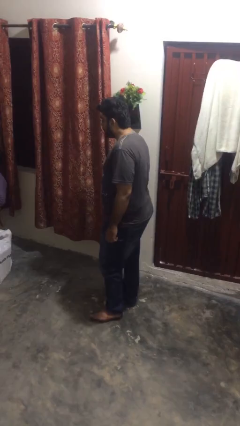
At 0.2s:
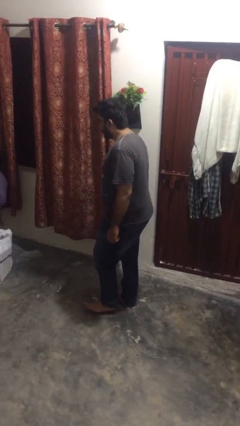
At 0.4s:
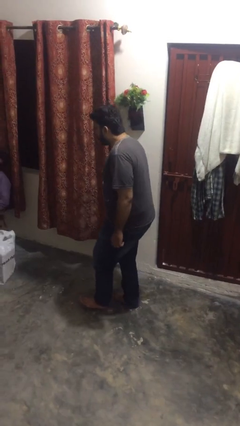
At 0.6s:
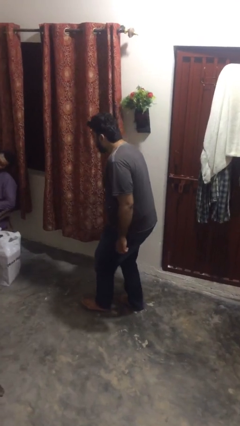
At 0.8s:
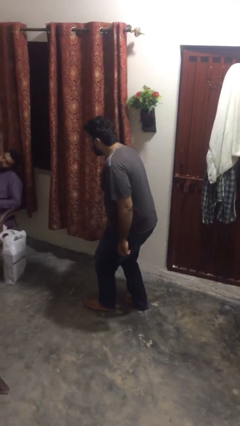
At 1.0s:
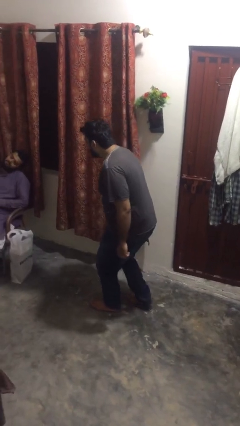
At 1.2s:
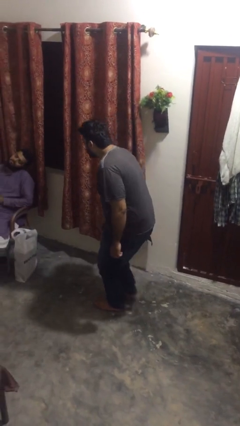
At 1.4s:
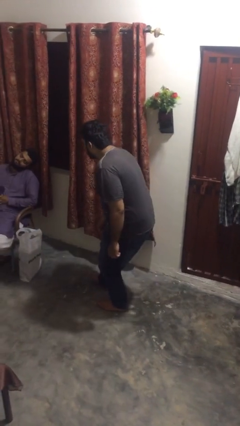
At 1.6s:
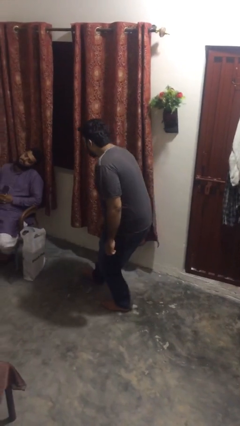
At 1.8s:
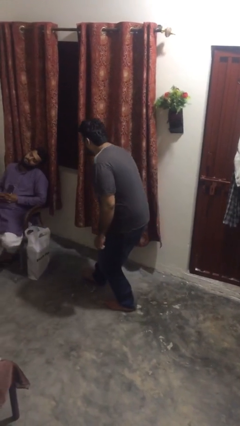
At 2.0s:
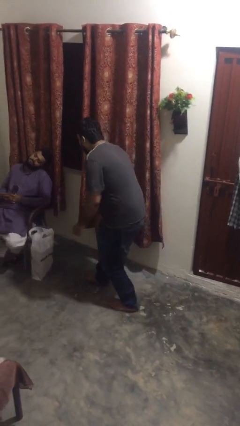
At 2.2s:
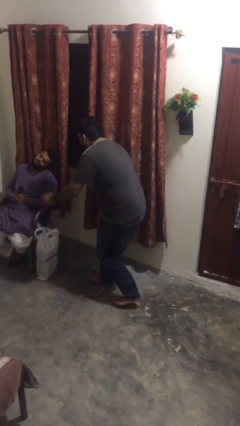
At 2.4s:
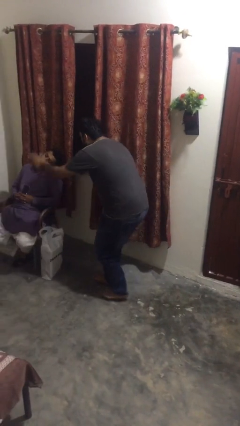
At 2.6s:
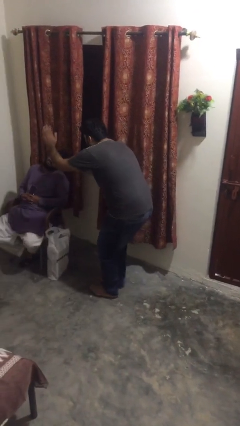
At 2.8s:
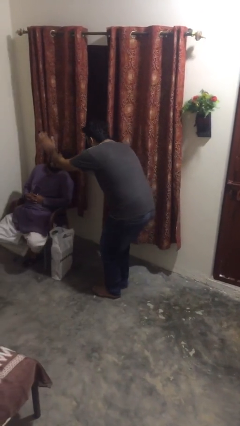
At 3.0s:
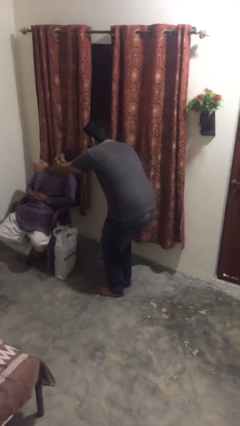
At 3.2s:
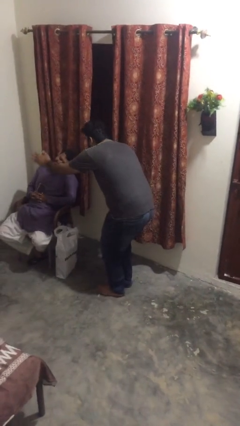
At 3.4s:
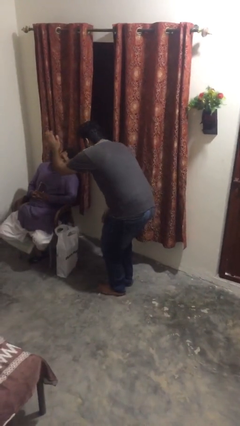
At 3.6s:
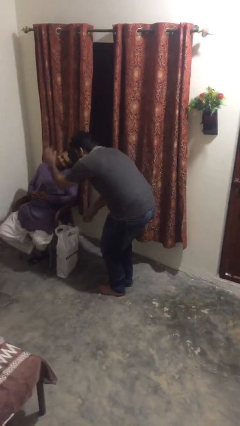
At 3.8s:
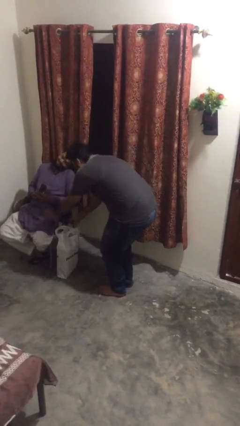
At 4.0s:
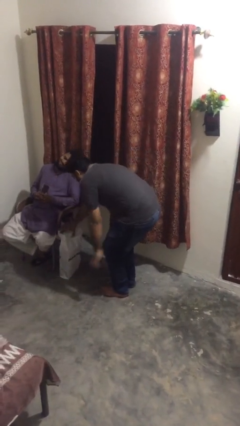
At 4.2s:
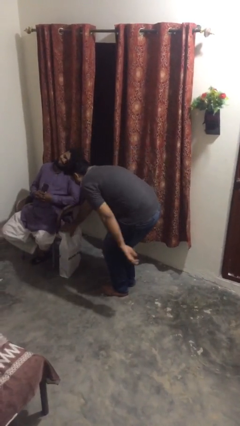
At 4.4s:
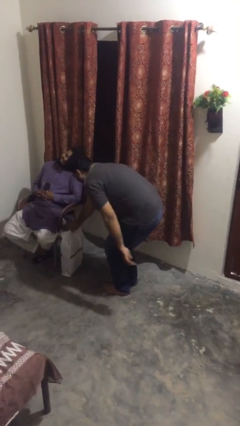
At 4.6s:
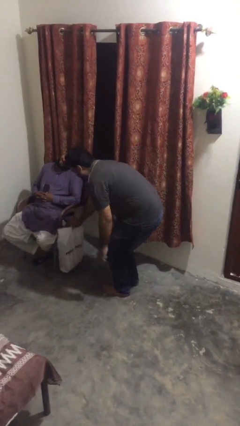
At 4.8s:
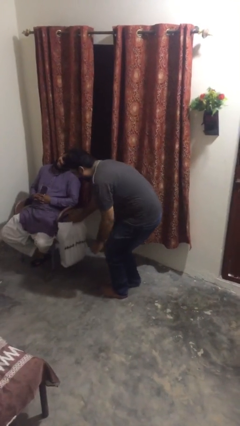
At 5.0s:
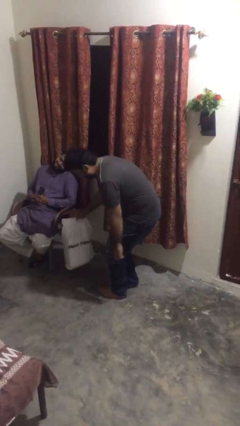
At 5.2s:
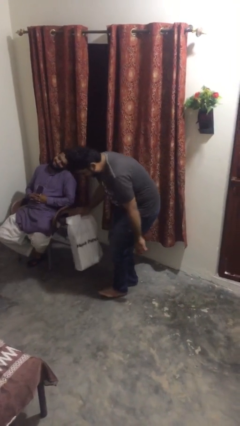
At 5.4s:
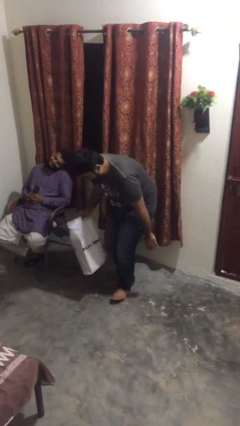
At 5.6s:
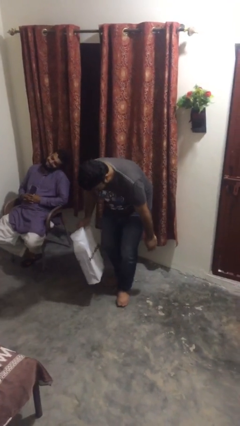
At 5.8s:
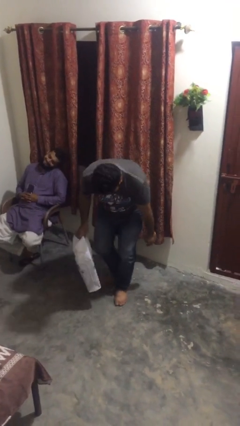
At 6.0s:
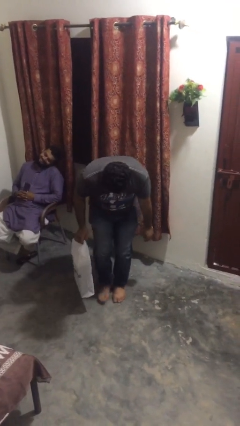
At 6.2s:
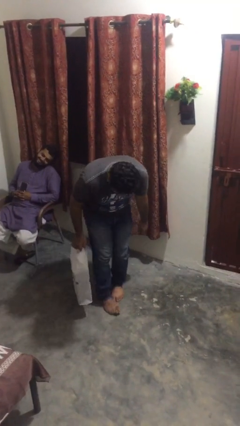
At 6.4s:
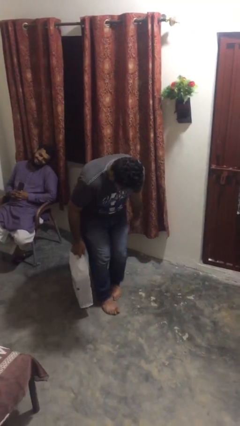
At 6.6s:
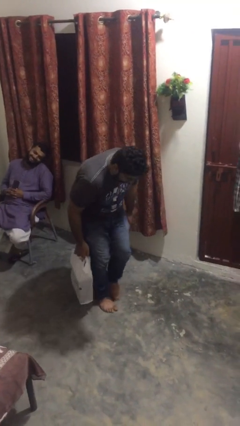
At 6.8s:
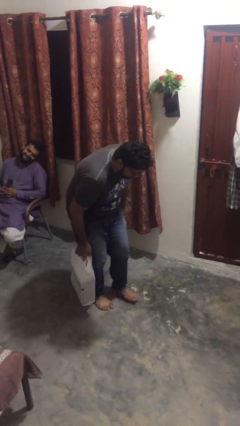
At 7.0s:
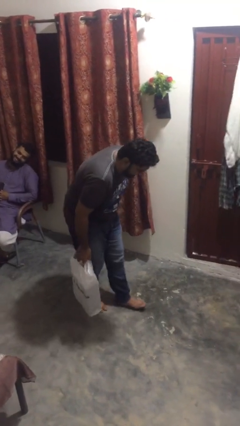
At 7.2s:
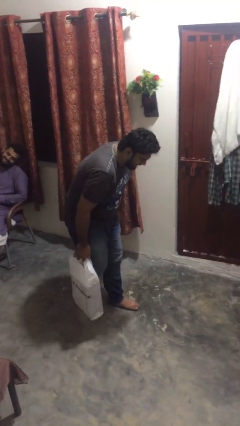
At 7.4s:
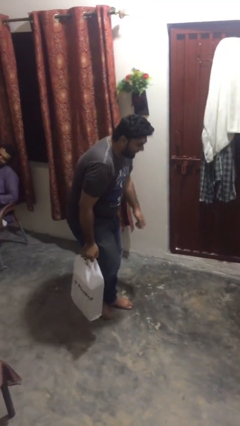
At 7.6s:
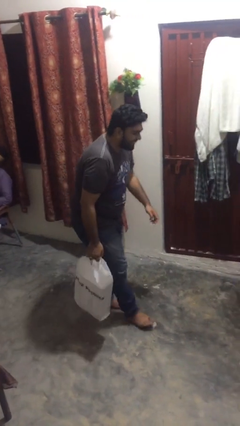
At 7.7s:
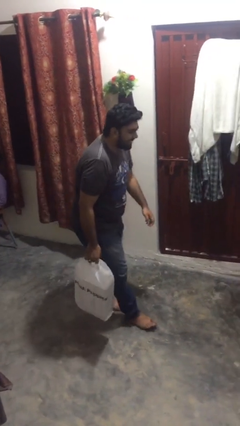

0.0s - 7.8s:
person steals object from person

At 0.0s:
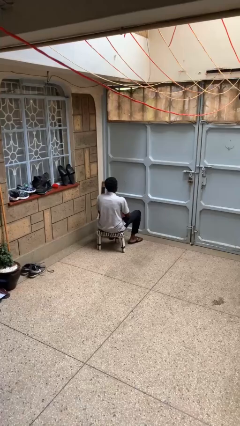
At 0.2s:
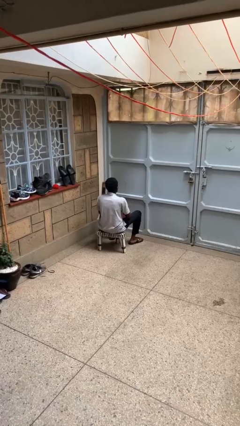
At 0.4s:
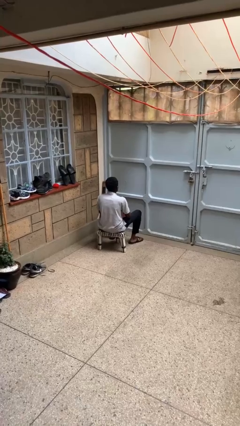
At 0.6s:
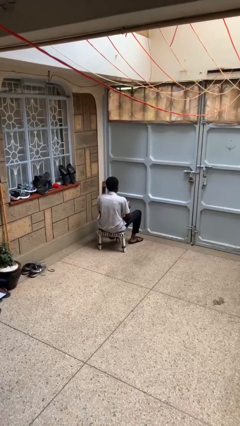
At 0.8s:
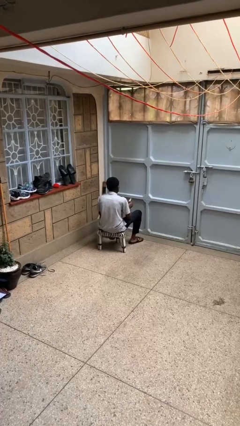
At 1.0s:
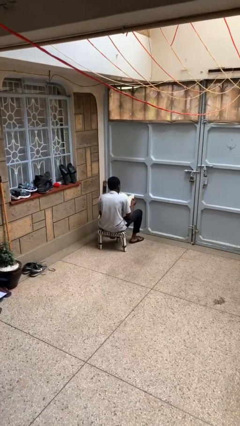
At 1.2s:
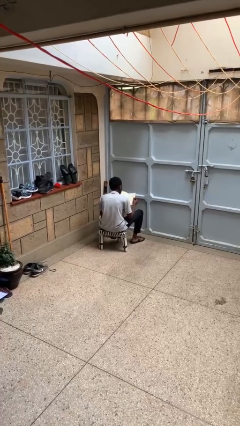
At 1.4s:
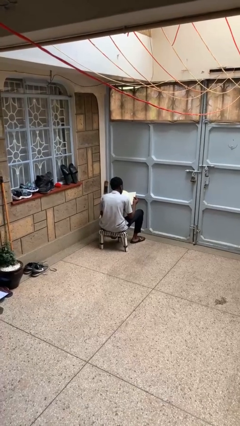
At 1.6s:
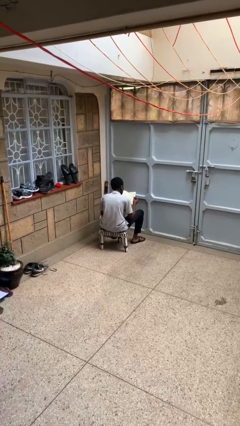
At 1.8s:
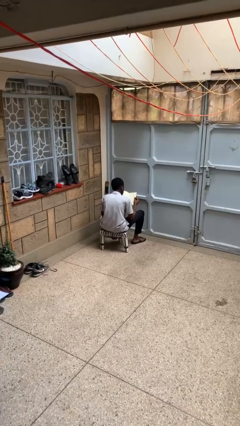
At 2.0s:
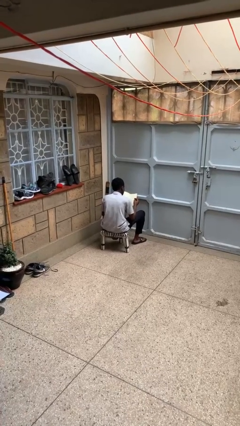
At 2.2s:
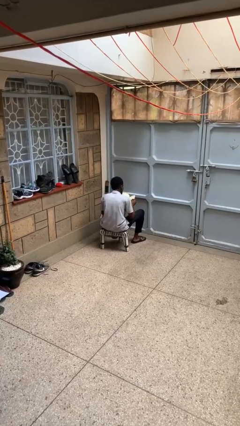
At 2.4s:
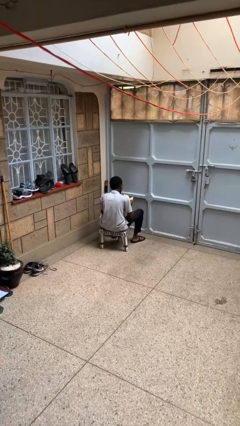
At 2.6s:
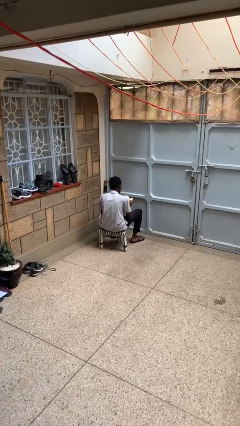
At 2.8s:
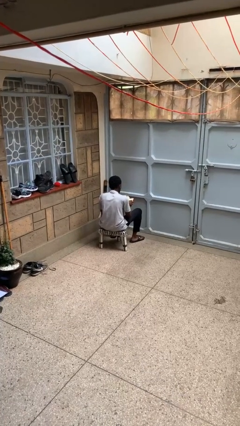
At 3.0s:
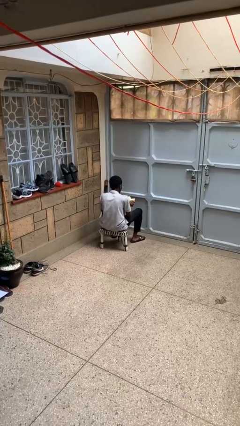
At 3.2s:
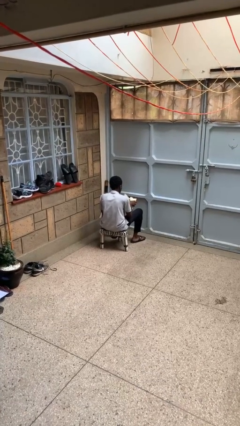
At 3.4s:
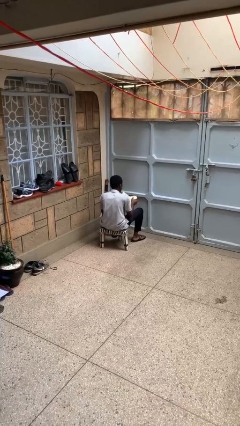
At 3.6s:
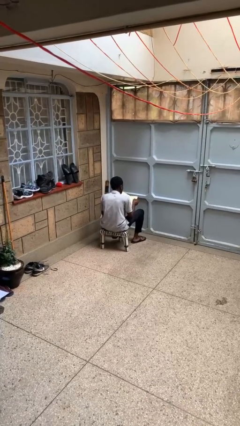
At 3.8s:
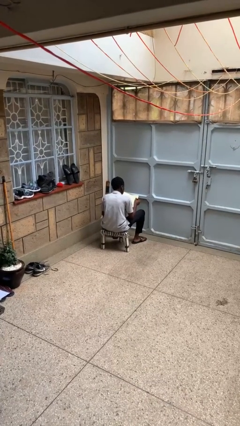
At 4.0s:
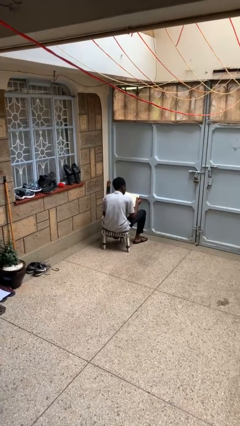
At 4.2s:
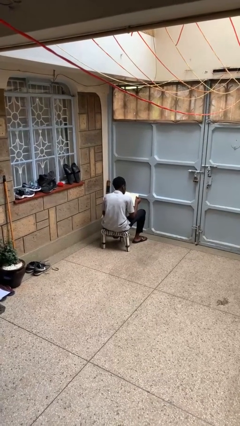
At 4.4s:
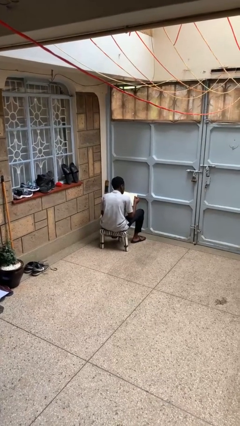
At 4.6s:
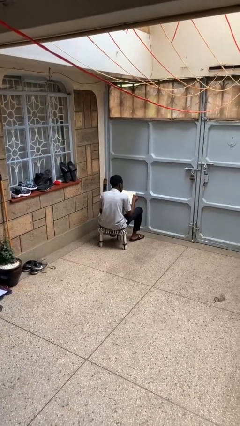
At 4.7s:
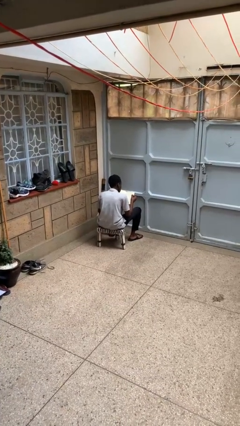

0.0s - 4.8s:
person reads book

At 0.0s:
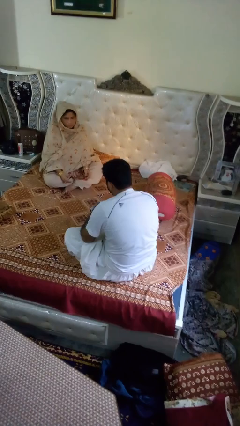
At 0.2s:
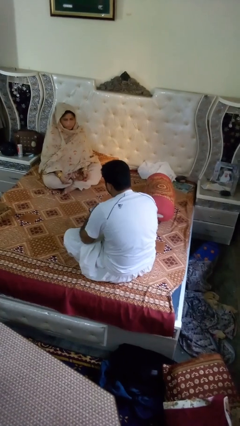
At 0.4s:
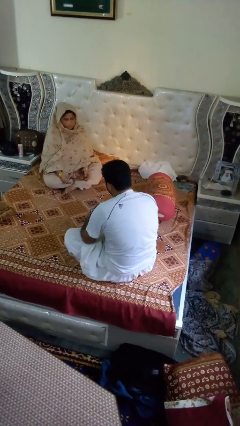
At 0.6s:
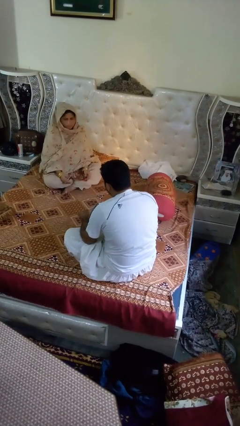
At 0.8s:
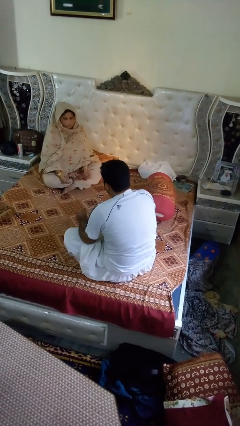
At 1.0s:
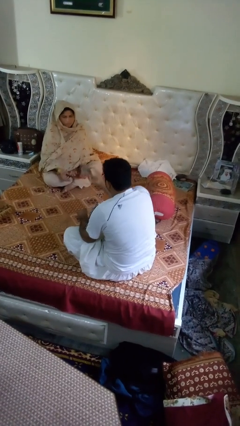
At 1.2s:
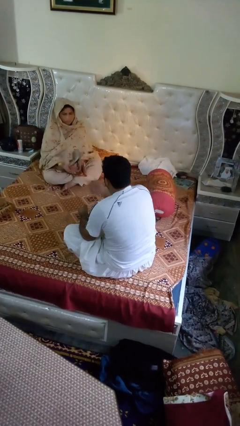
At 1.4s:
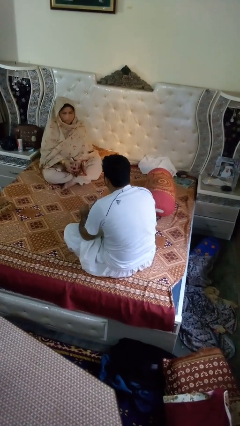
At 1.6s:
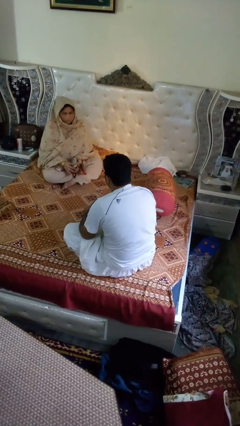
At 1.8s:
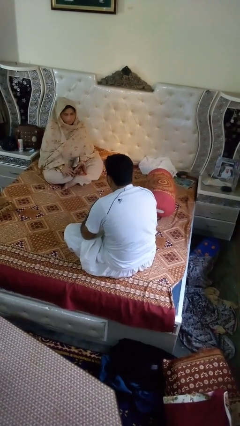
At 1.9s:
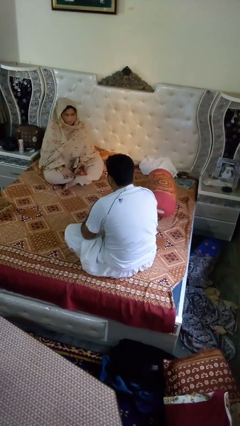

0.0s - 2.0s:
person throws object to person

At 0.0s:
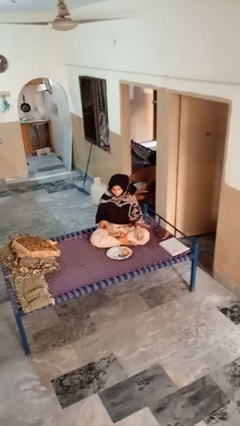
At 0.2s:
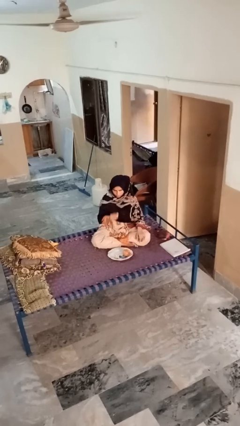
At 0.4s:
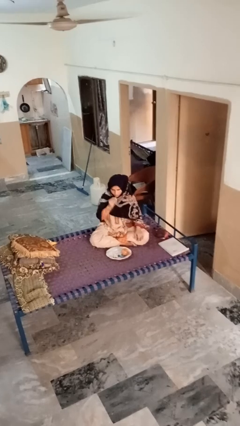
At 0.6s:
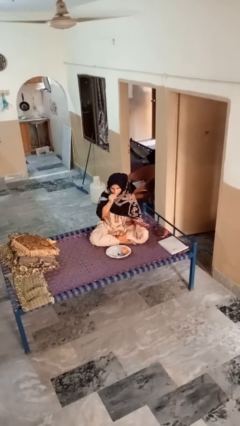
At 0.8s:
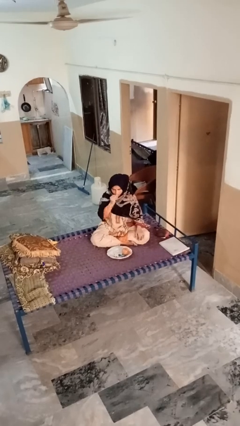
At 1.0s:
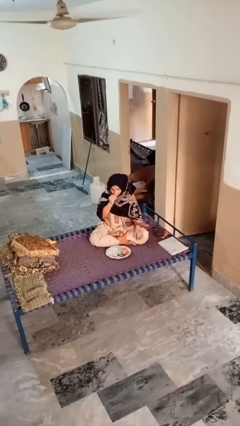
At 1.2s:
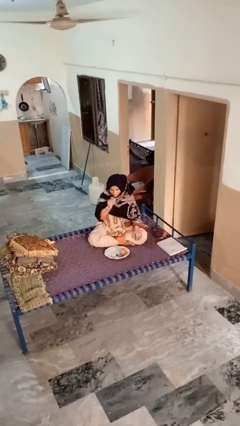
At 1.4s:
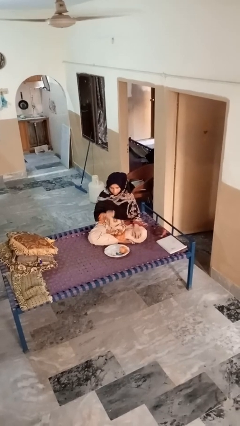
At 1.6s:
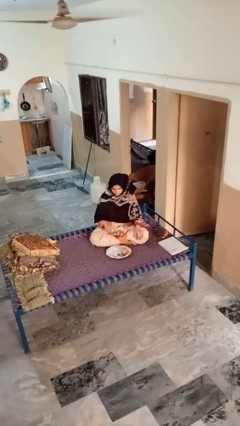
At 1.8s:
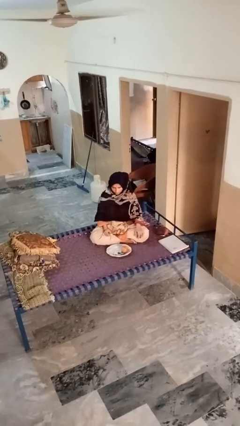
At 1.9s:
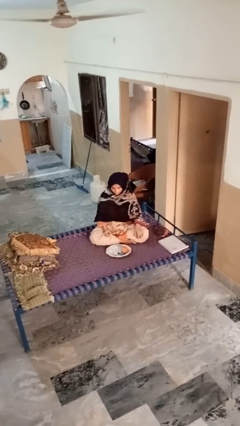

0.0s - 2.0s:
person eats apple

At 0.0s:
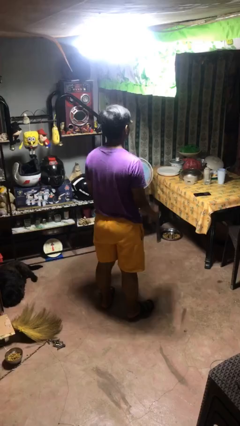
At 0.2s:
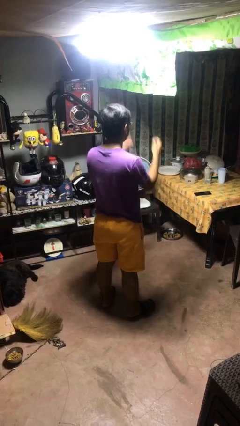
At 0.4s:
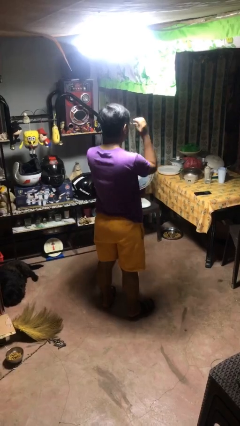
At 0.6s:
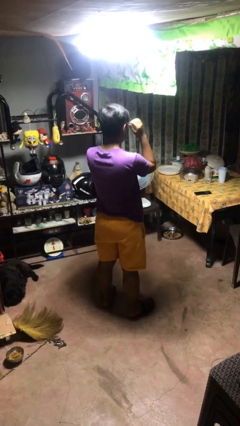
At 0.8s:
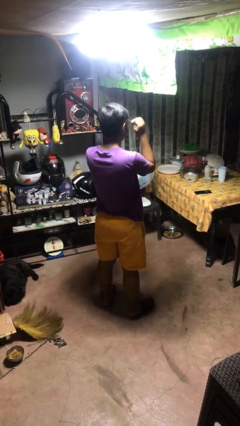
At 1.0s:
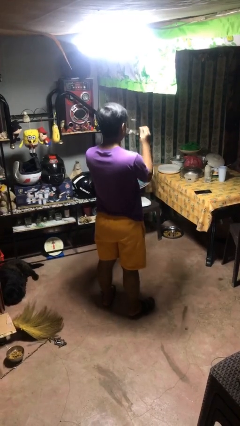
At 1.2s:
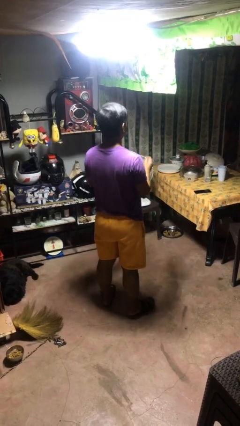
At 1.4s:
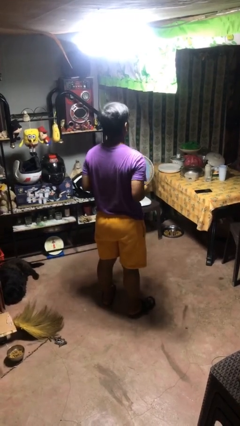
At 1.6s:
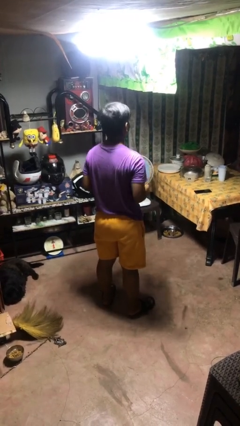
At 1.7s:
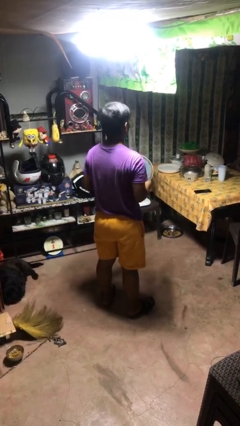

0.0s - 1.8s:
person takes off glasses
